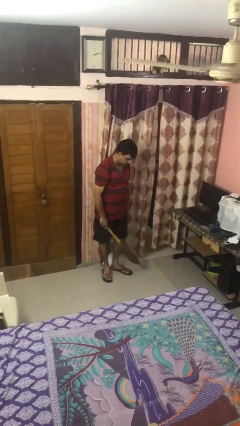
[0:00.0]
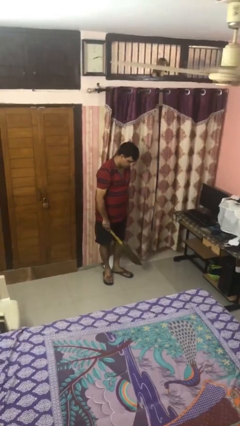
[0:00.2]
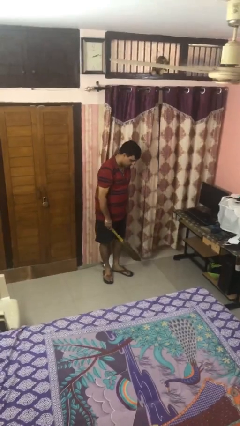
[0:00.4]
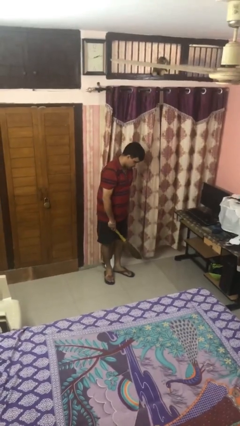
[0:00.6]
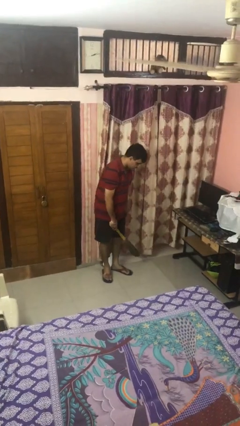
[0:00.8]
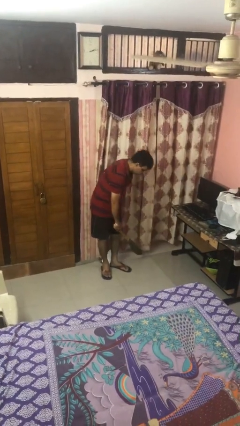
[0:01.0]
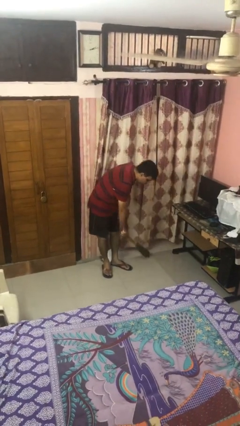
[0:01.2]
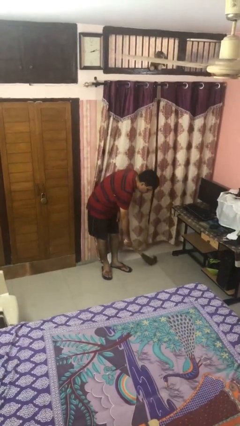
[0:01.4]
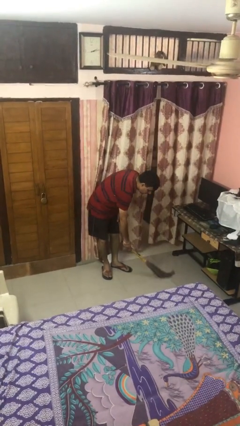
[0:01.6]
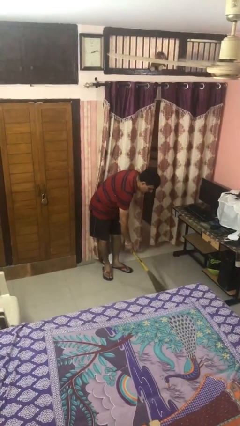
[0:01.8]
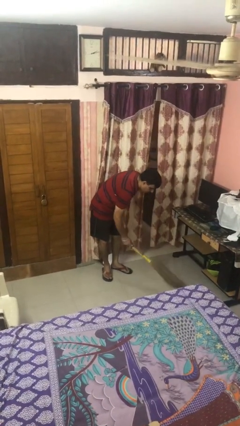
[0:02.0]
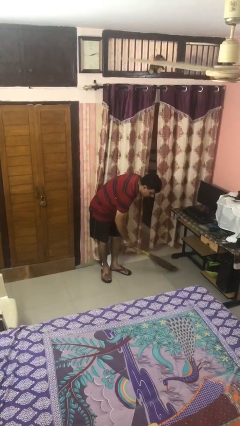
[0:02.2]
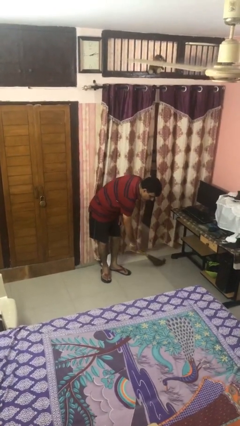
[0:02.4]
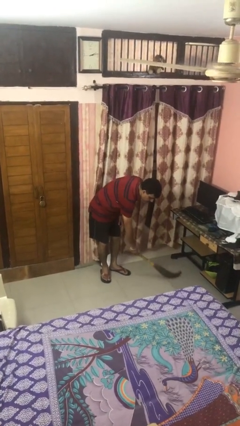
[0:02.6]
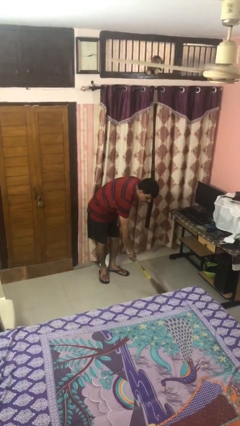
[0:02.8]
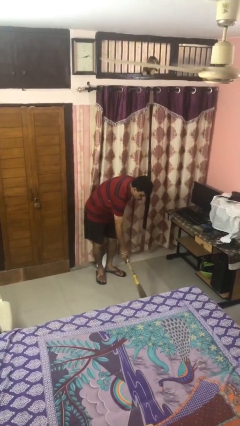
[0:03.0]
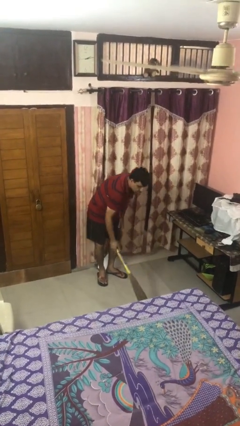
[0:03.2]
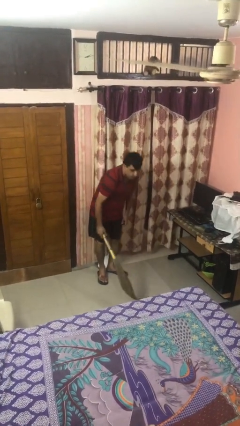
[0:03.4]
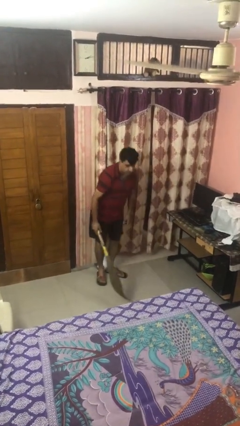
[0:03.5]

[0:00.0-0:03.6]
person sweeps floor

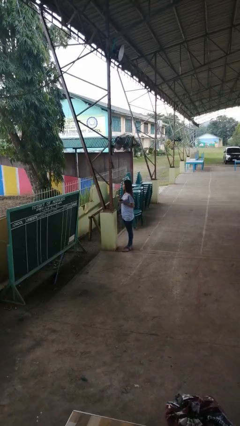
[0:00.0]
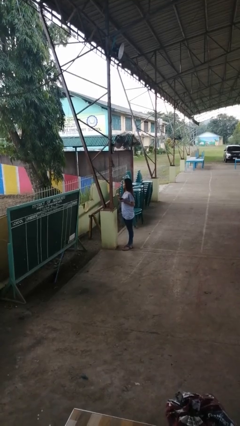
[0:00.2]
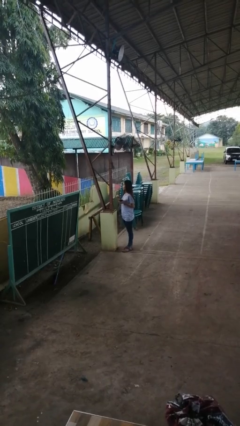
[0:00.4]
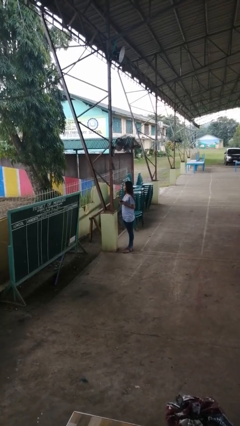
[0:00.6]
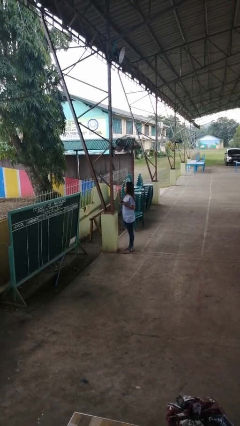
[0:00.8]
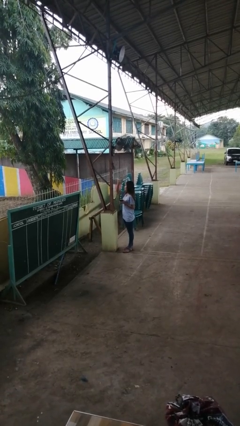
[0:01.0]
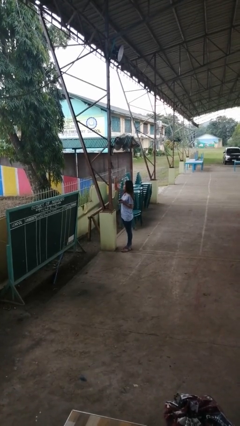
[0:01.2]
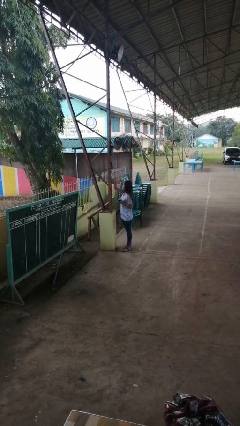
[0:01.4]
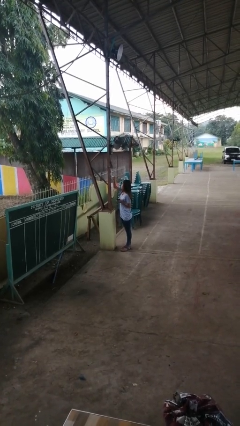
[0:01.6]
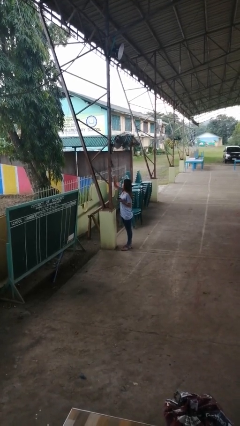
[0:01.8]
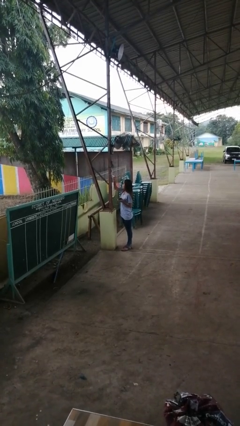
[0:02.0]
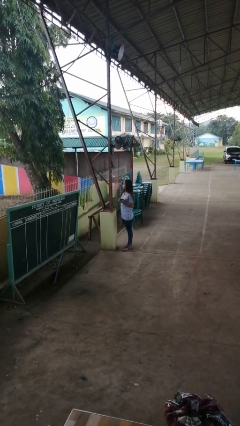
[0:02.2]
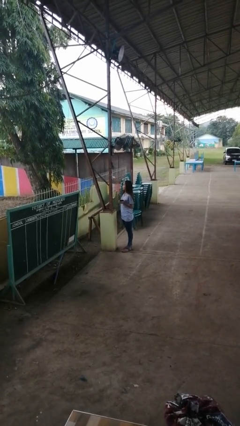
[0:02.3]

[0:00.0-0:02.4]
person plugs into electrical socket

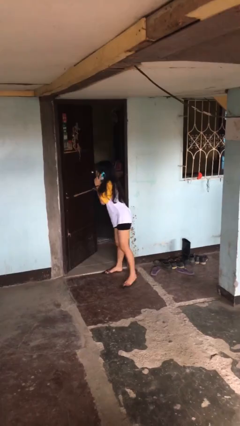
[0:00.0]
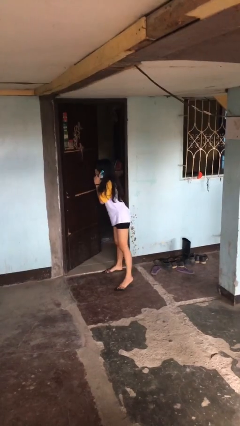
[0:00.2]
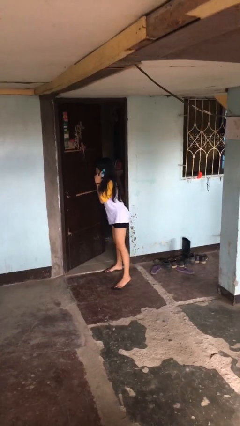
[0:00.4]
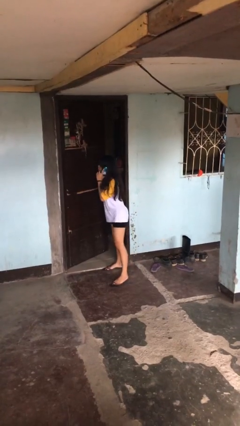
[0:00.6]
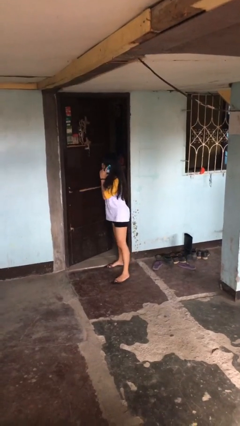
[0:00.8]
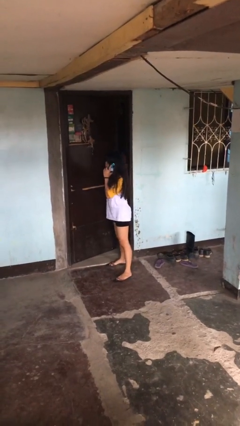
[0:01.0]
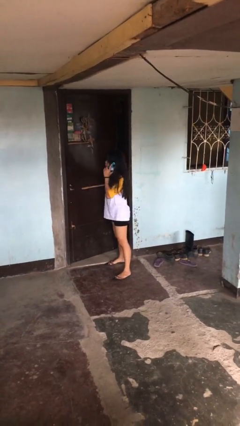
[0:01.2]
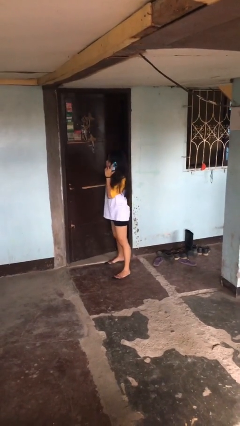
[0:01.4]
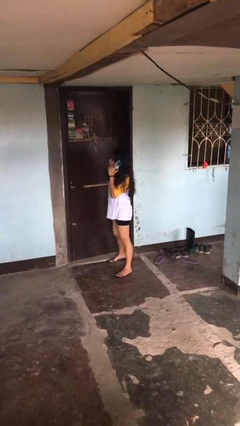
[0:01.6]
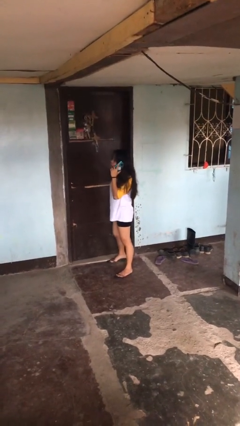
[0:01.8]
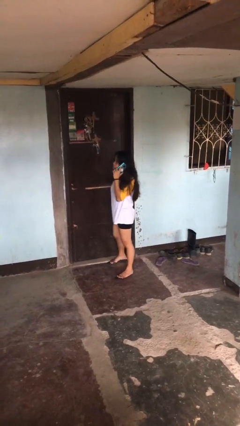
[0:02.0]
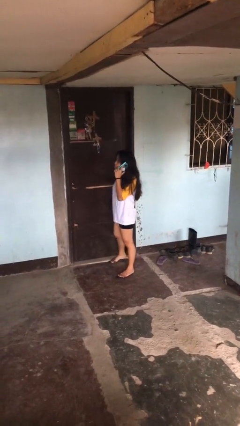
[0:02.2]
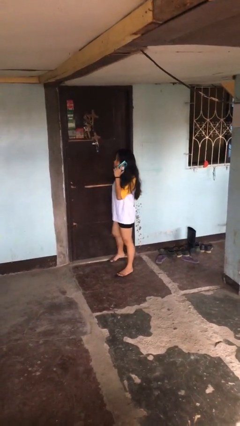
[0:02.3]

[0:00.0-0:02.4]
person closes facility door

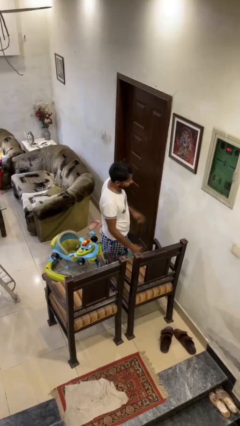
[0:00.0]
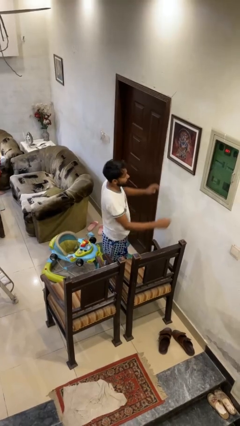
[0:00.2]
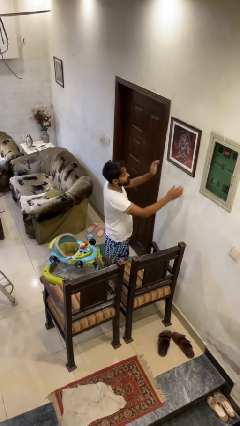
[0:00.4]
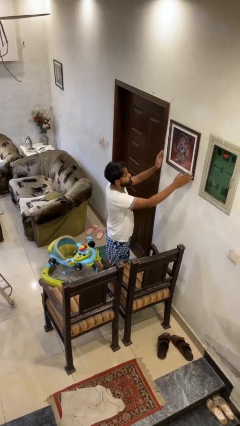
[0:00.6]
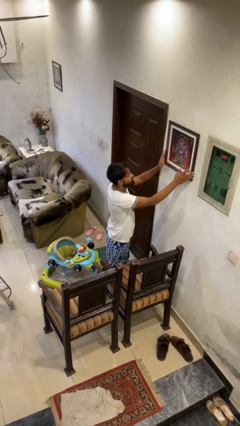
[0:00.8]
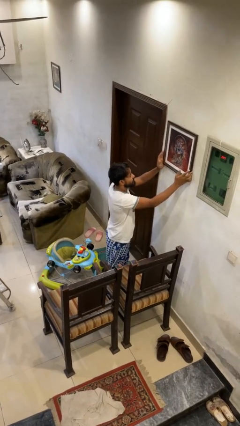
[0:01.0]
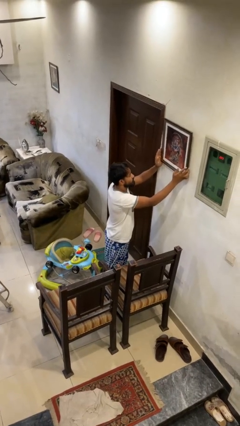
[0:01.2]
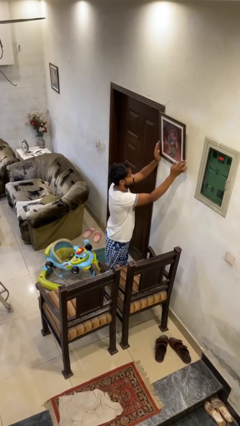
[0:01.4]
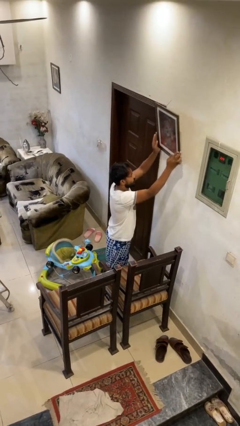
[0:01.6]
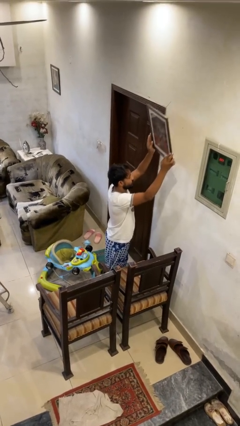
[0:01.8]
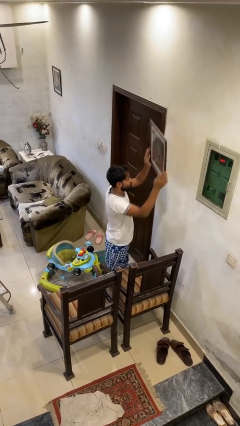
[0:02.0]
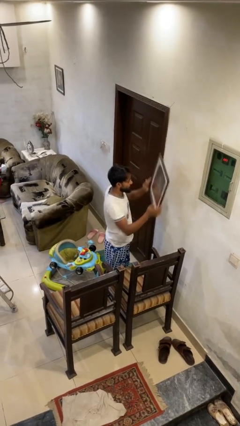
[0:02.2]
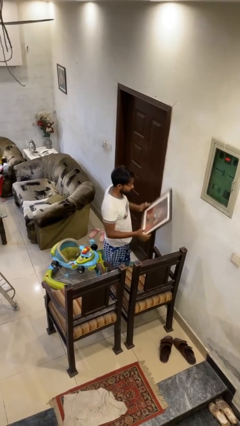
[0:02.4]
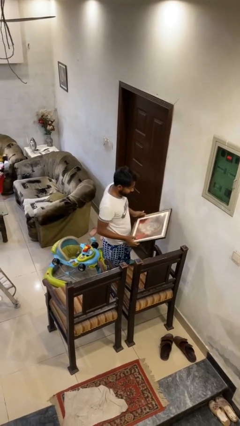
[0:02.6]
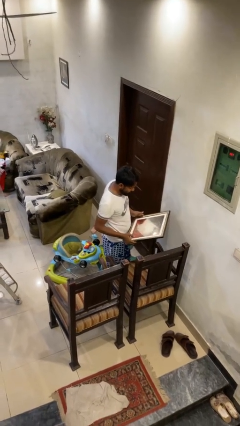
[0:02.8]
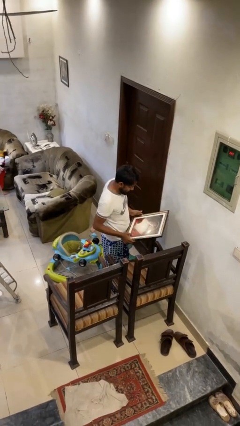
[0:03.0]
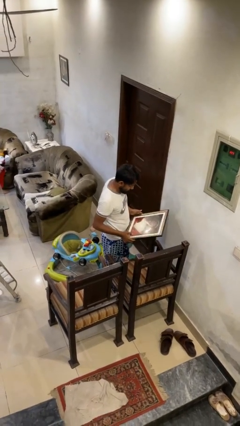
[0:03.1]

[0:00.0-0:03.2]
person takes down picture frame

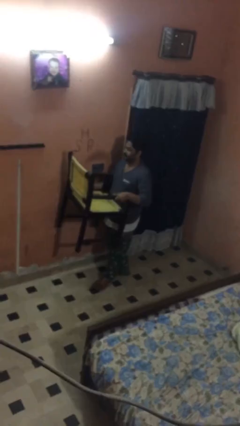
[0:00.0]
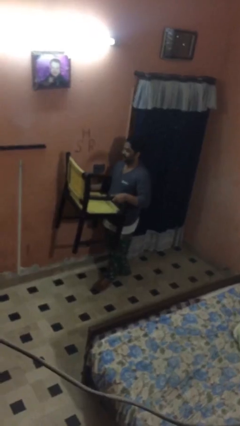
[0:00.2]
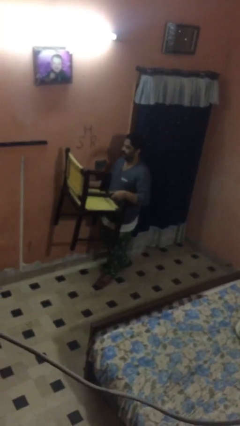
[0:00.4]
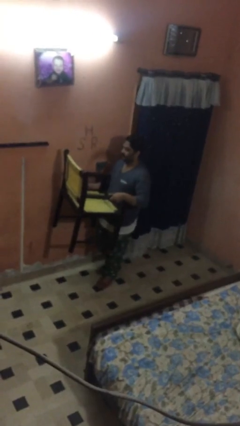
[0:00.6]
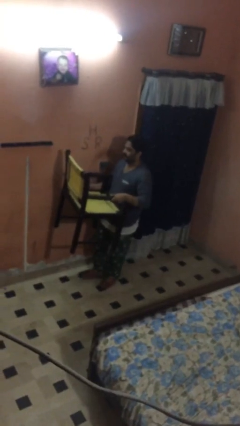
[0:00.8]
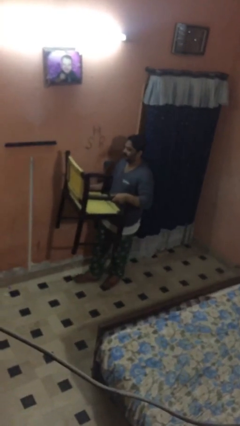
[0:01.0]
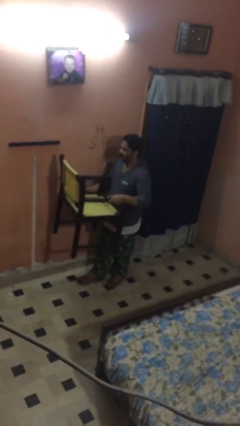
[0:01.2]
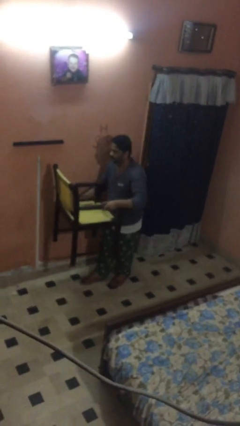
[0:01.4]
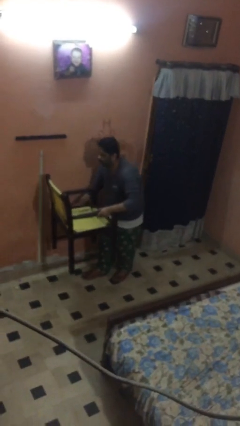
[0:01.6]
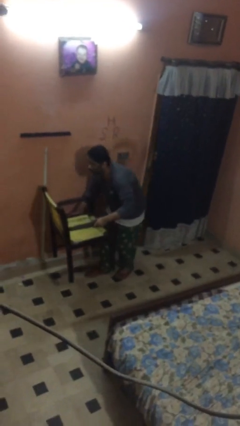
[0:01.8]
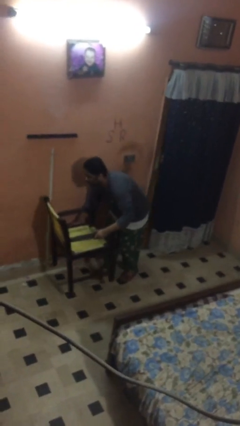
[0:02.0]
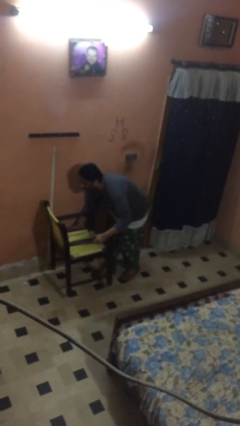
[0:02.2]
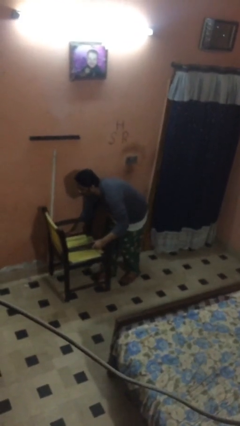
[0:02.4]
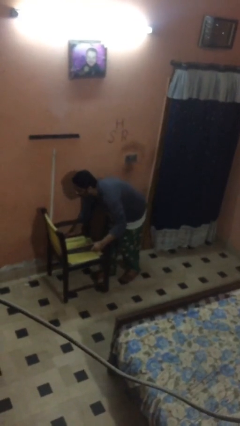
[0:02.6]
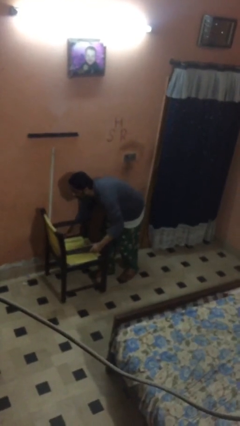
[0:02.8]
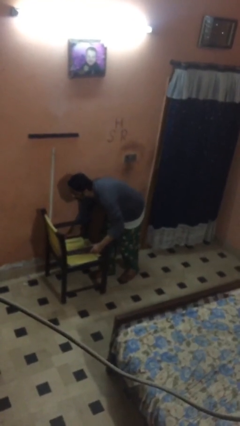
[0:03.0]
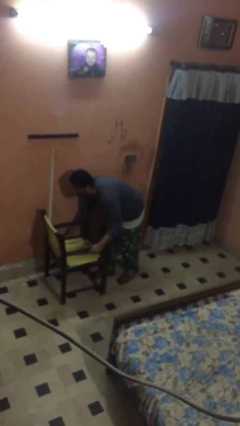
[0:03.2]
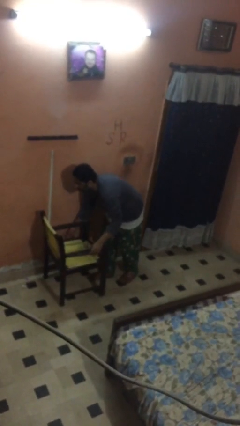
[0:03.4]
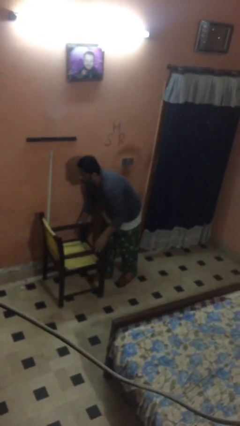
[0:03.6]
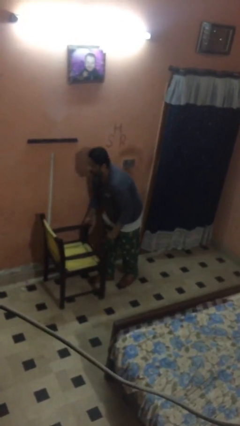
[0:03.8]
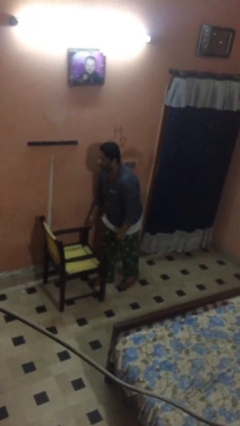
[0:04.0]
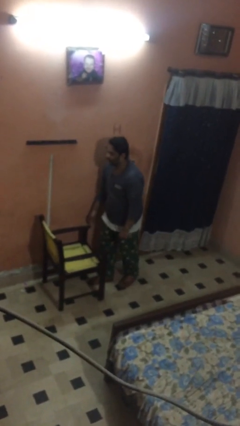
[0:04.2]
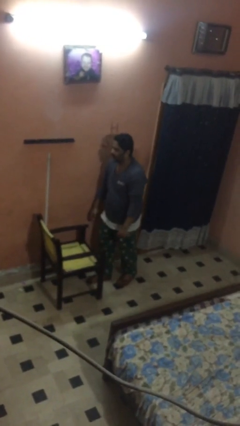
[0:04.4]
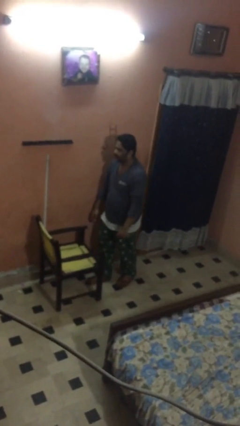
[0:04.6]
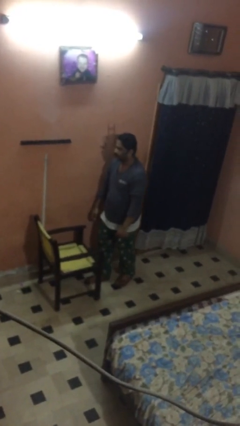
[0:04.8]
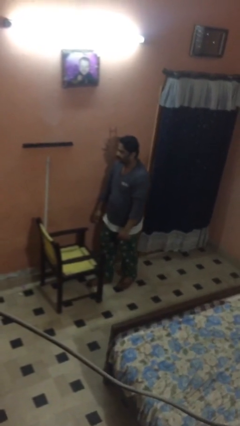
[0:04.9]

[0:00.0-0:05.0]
person puts down object on floor

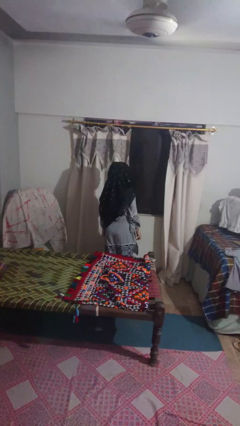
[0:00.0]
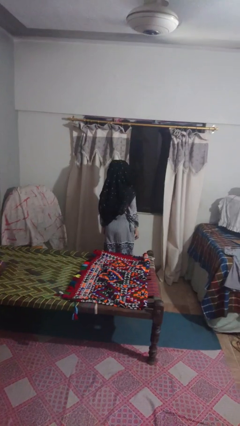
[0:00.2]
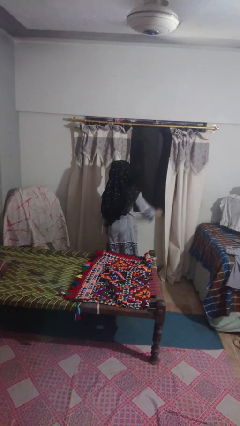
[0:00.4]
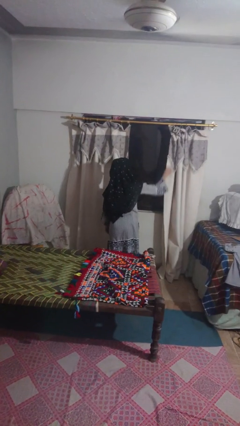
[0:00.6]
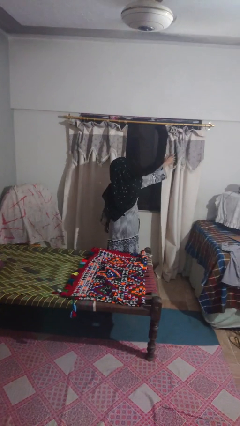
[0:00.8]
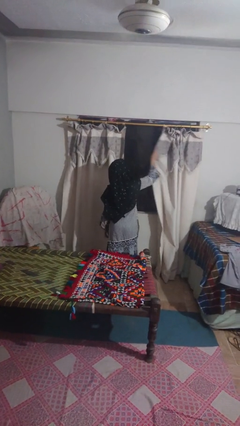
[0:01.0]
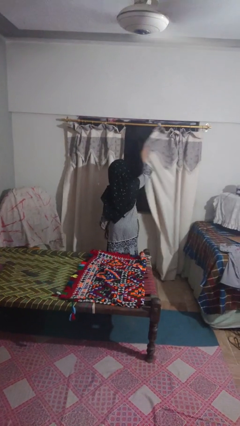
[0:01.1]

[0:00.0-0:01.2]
person closes curtains
